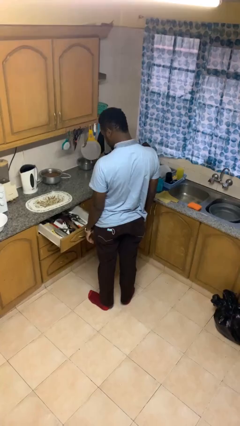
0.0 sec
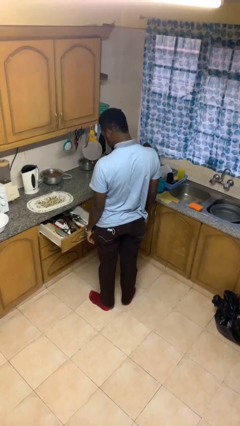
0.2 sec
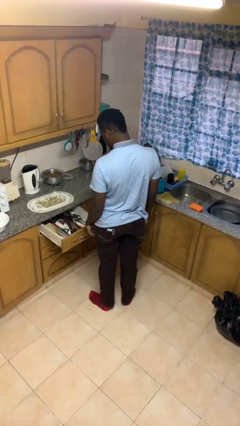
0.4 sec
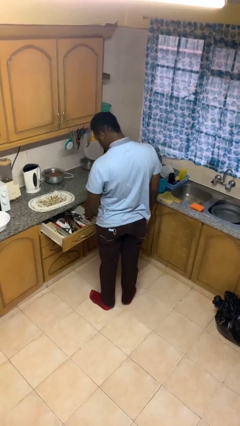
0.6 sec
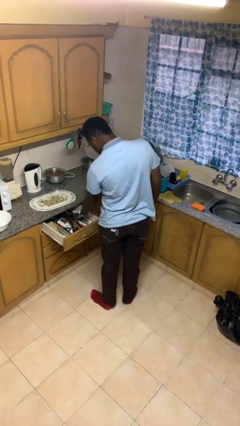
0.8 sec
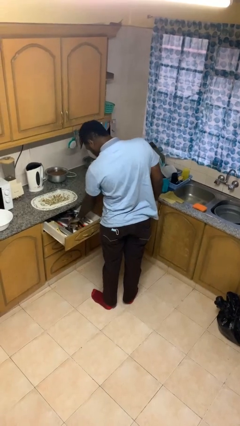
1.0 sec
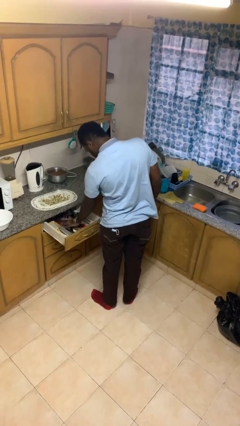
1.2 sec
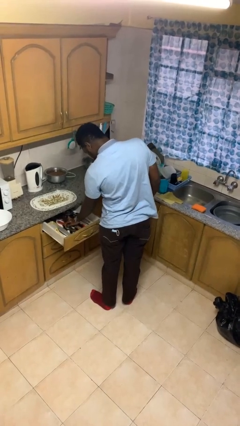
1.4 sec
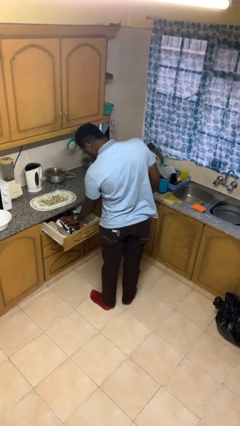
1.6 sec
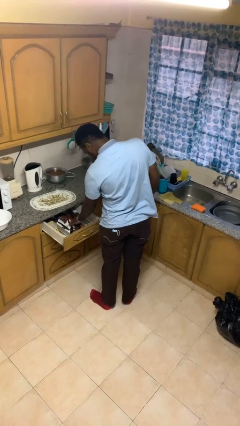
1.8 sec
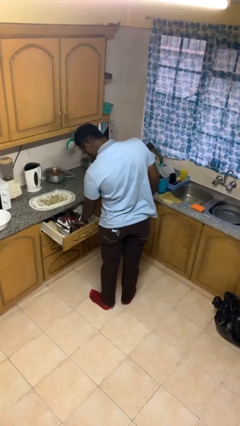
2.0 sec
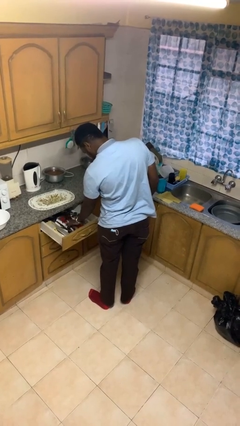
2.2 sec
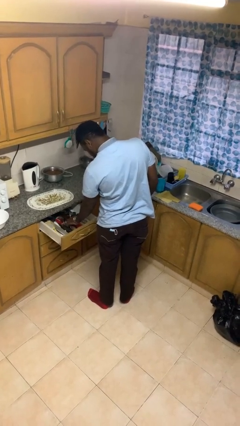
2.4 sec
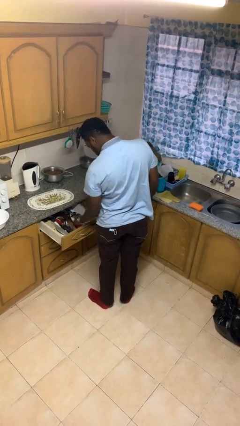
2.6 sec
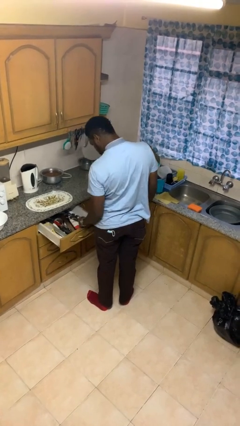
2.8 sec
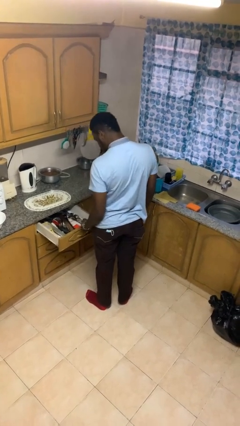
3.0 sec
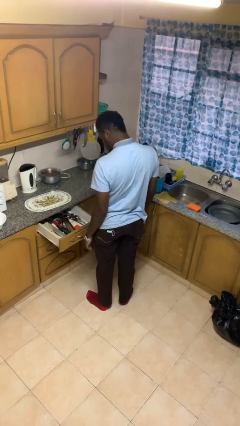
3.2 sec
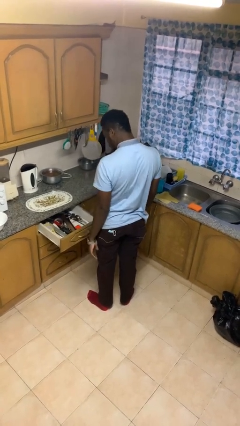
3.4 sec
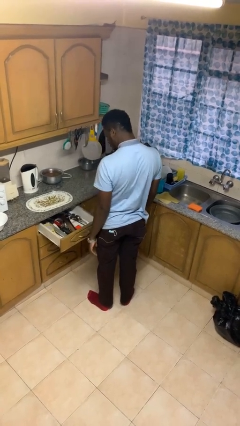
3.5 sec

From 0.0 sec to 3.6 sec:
person searches in kitchen drawer

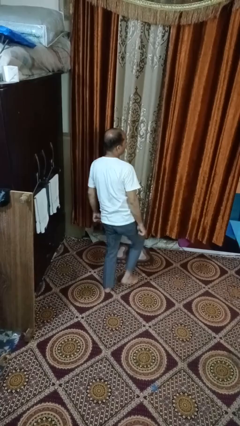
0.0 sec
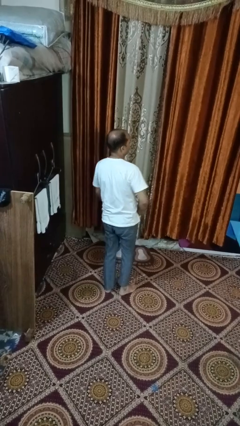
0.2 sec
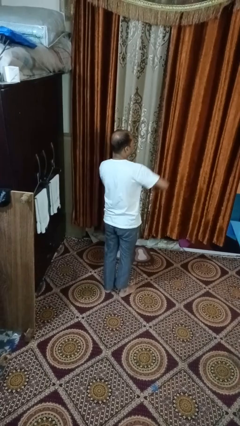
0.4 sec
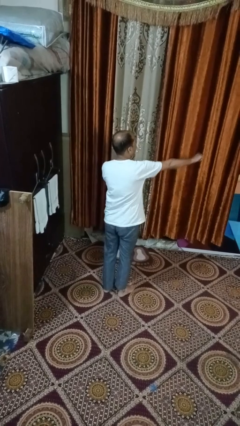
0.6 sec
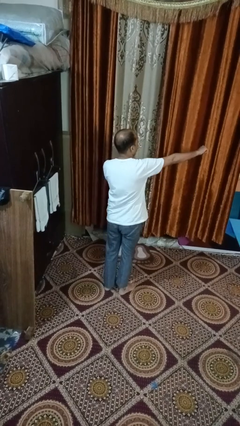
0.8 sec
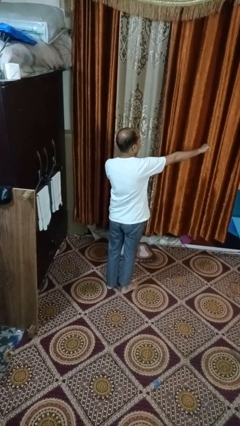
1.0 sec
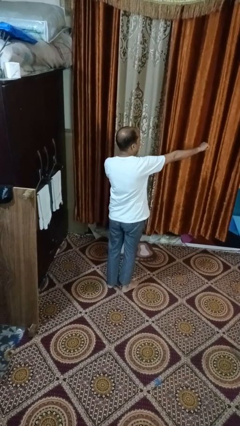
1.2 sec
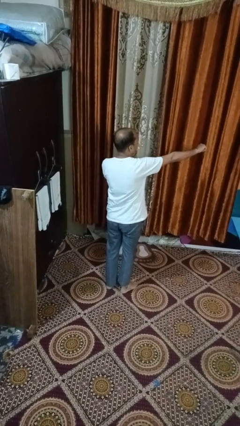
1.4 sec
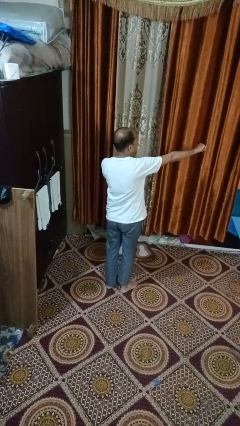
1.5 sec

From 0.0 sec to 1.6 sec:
person karate chop

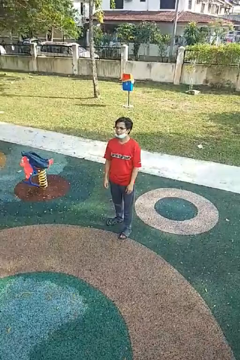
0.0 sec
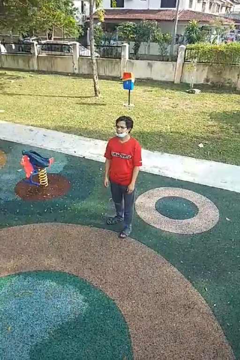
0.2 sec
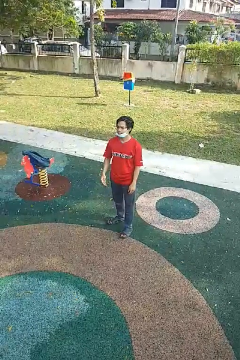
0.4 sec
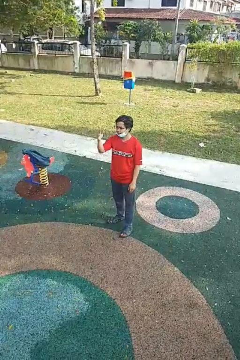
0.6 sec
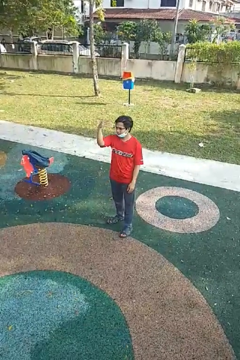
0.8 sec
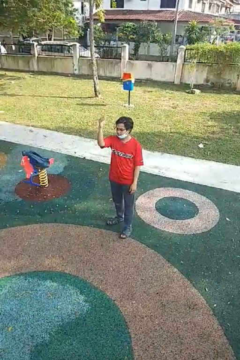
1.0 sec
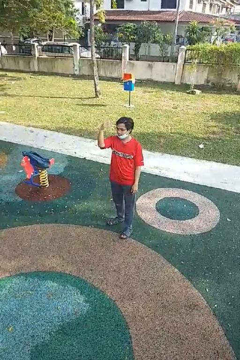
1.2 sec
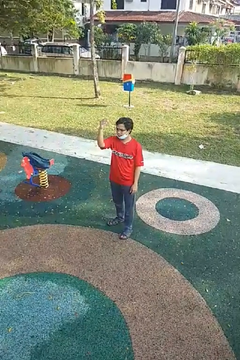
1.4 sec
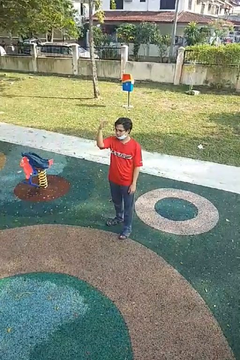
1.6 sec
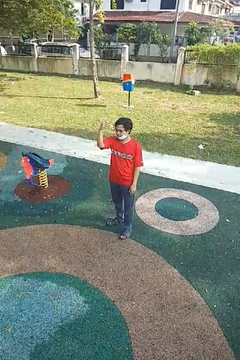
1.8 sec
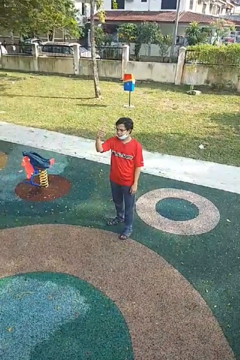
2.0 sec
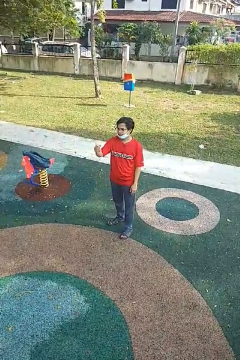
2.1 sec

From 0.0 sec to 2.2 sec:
person gestures come here

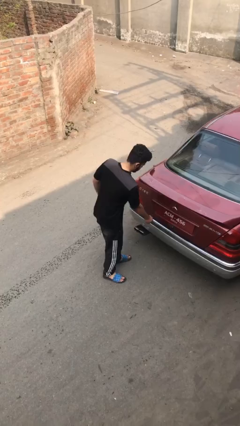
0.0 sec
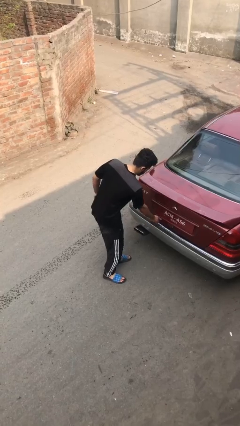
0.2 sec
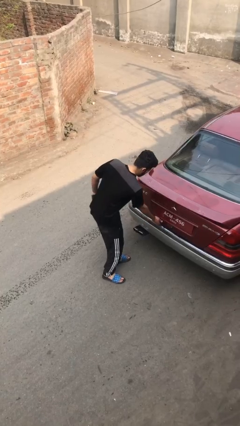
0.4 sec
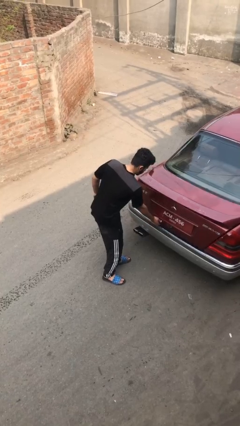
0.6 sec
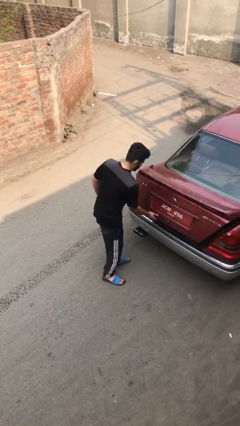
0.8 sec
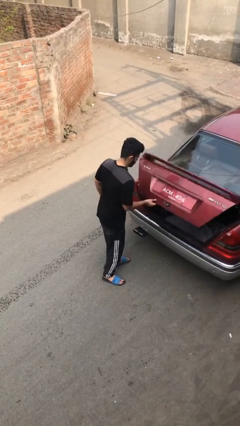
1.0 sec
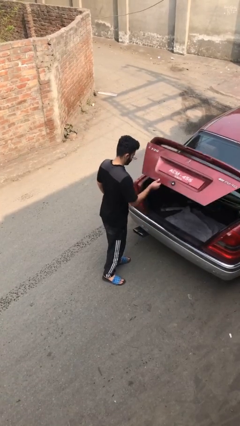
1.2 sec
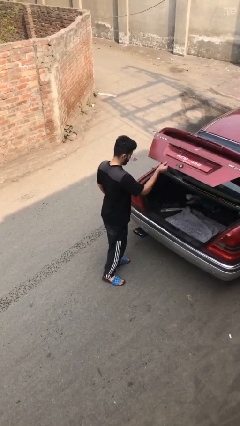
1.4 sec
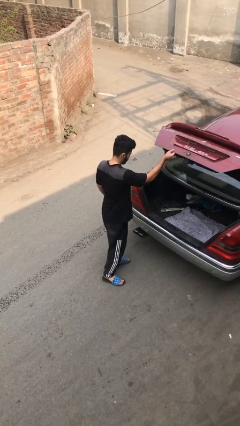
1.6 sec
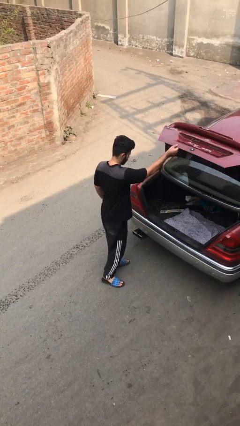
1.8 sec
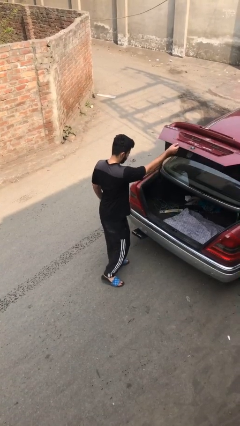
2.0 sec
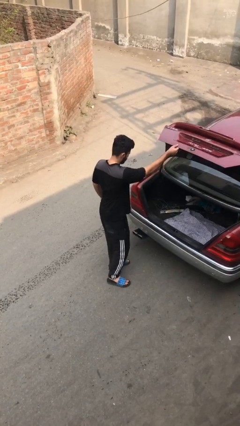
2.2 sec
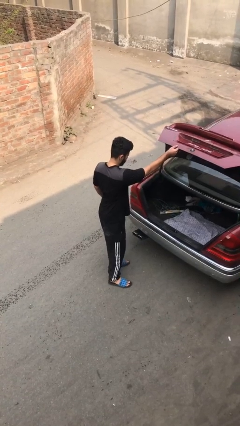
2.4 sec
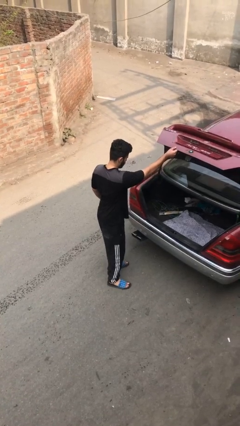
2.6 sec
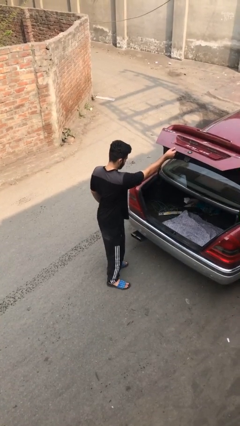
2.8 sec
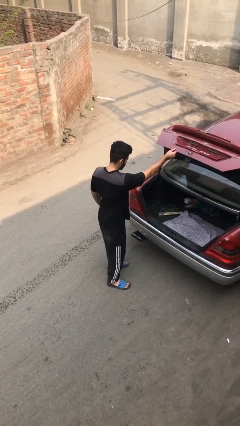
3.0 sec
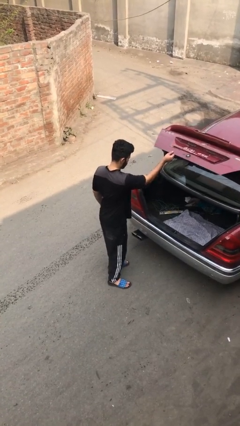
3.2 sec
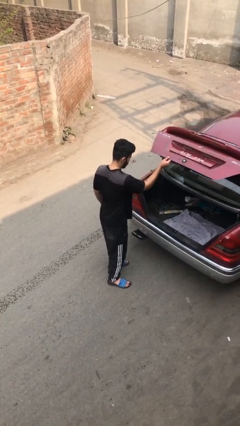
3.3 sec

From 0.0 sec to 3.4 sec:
person opens car trunk

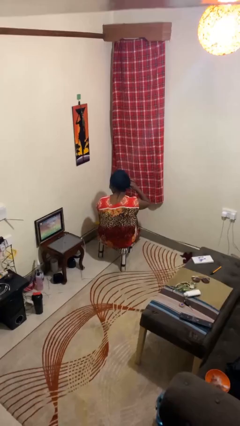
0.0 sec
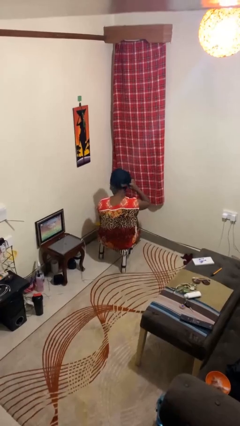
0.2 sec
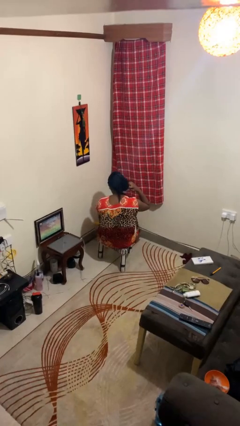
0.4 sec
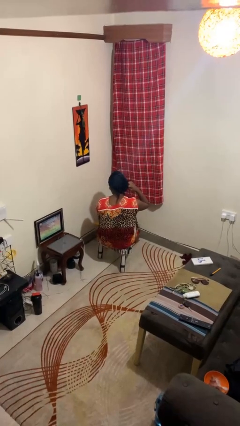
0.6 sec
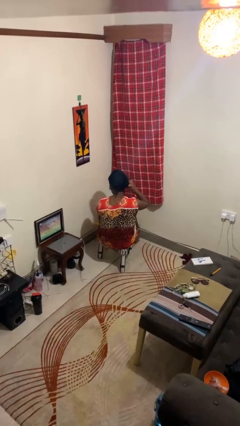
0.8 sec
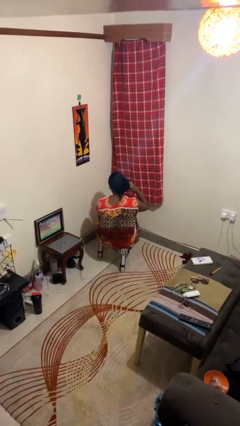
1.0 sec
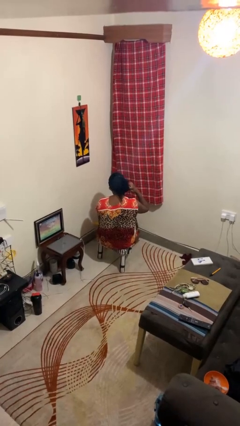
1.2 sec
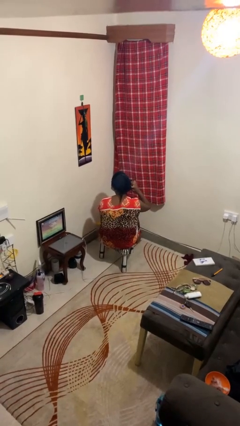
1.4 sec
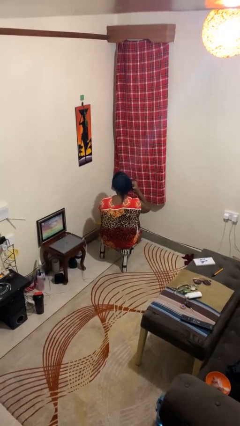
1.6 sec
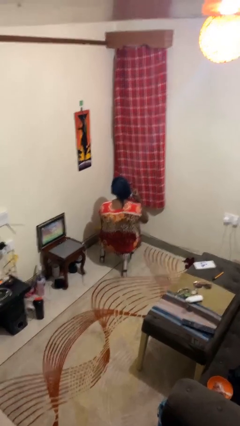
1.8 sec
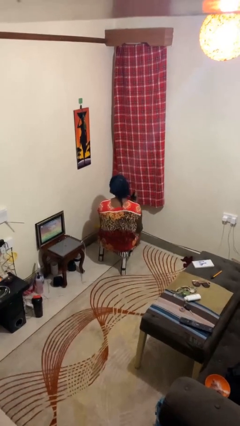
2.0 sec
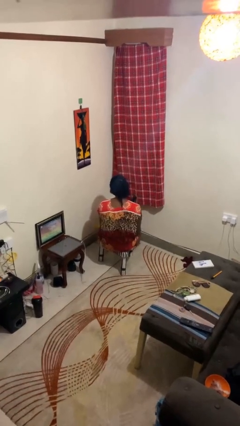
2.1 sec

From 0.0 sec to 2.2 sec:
person brushes hair

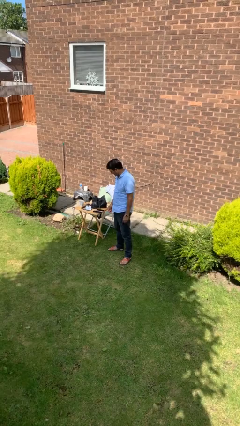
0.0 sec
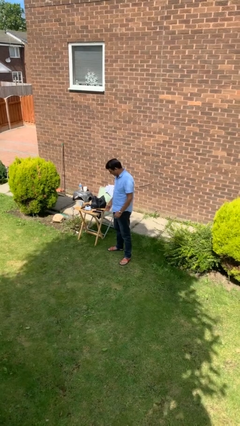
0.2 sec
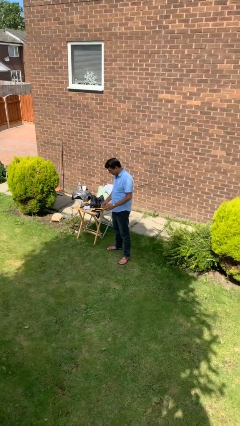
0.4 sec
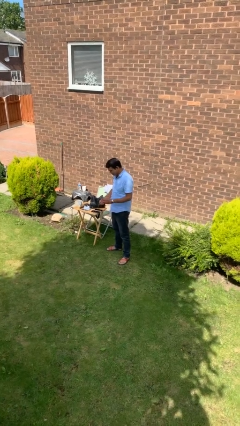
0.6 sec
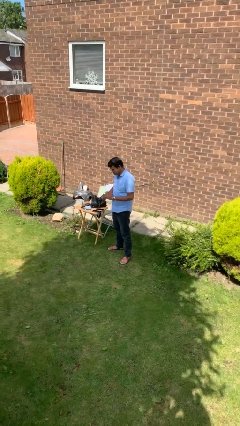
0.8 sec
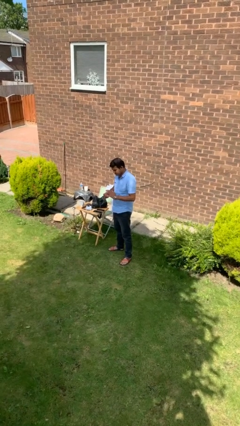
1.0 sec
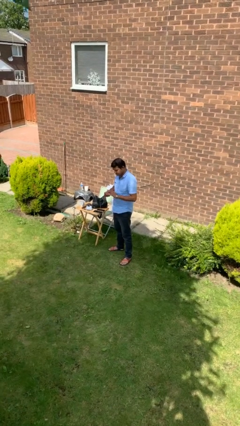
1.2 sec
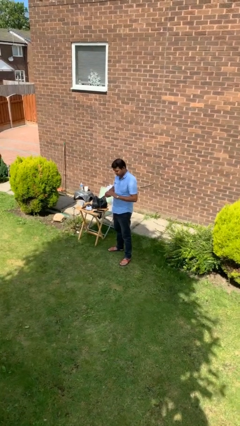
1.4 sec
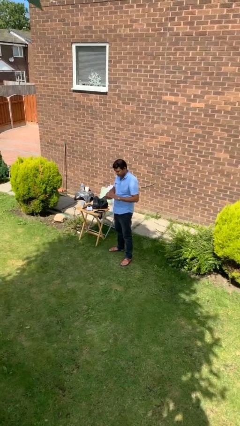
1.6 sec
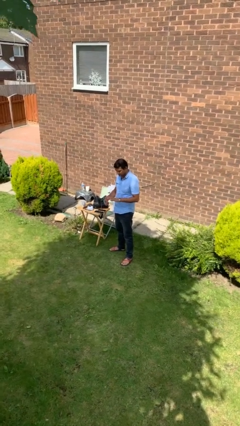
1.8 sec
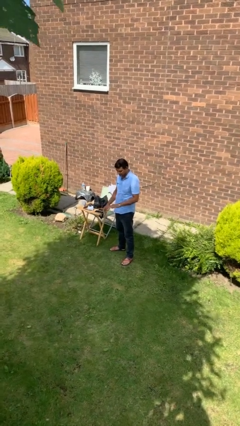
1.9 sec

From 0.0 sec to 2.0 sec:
person puts on ring

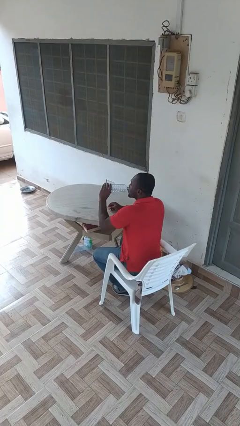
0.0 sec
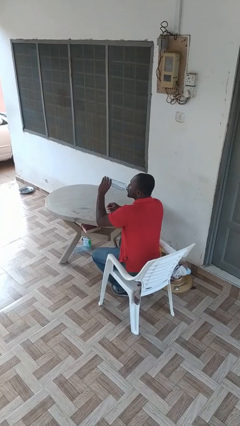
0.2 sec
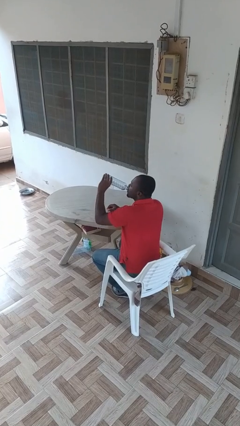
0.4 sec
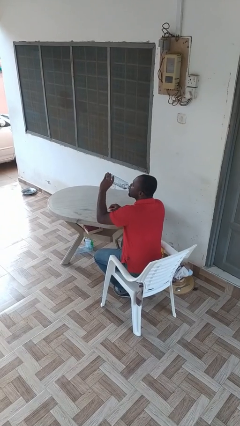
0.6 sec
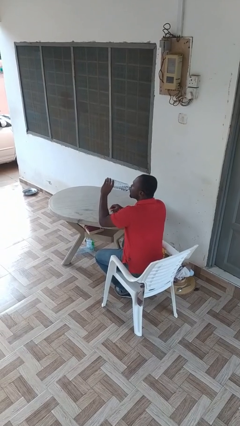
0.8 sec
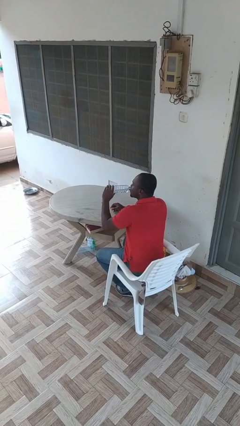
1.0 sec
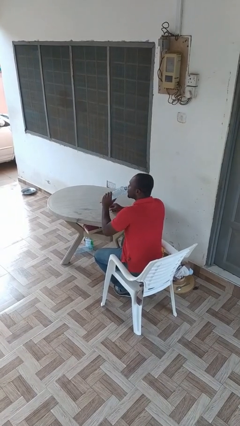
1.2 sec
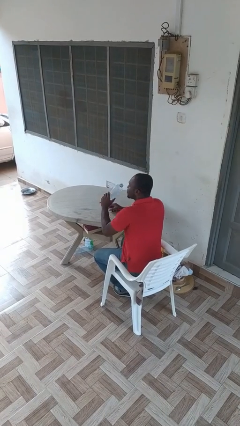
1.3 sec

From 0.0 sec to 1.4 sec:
person drinks from bottle

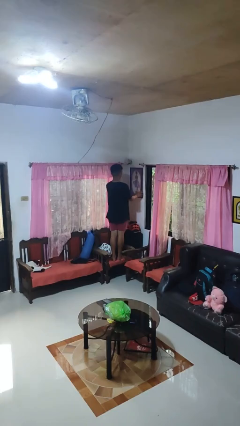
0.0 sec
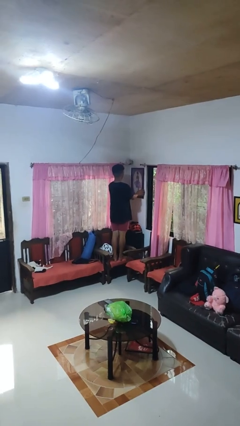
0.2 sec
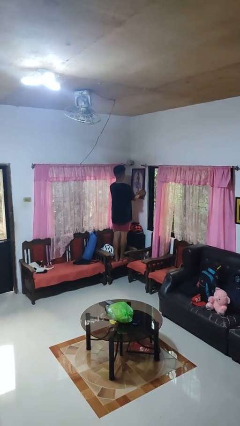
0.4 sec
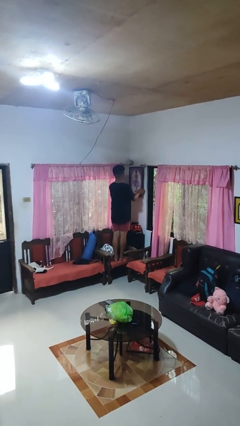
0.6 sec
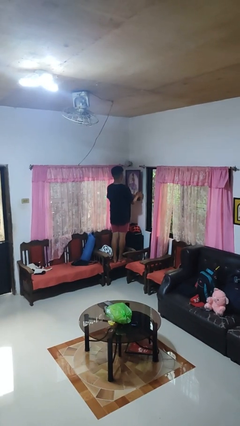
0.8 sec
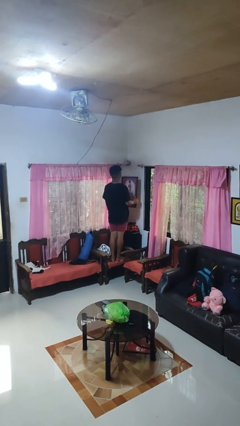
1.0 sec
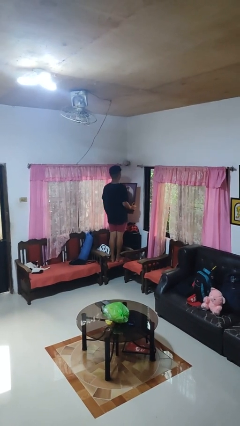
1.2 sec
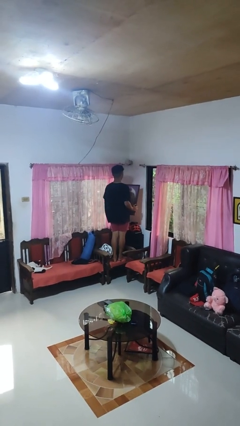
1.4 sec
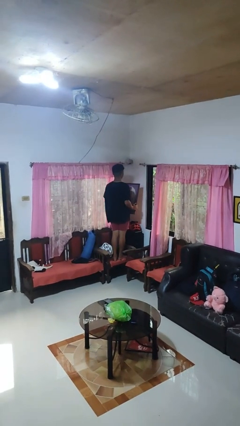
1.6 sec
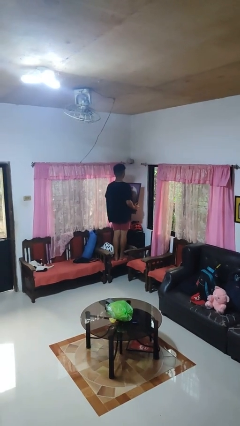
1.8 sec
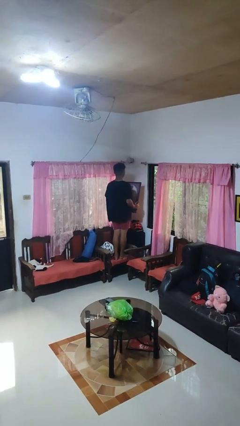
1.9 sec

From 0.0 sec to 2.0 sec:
person takes down picture frame
